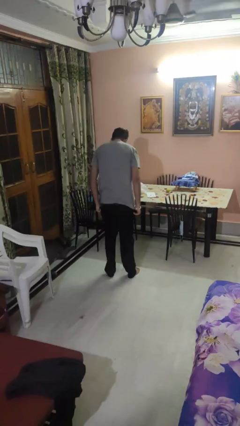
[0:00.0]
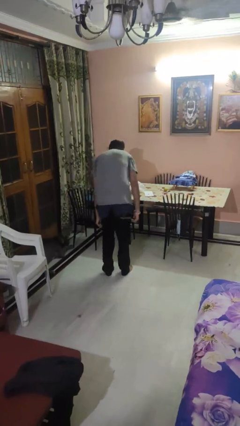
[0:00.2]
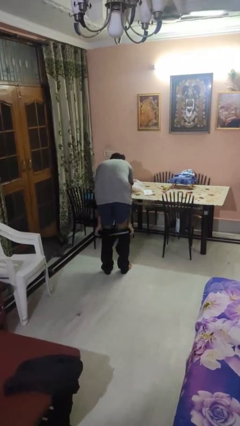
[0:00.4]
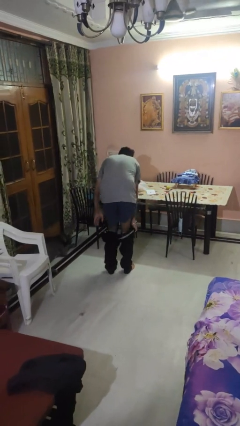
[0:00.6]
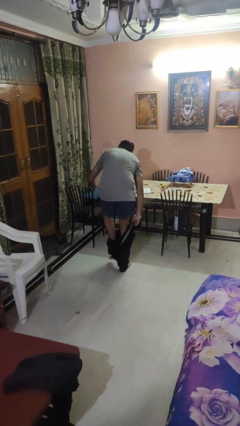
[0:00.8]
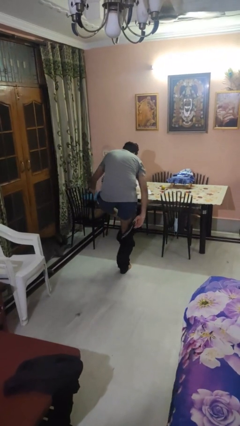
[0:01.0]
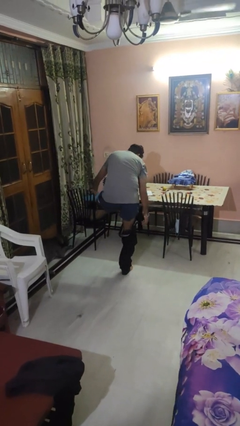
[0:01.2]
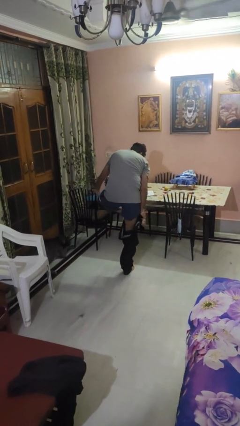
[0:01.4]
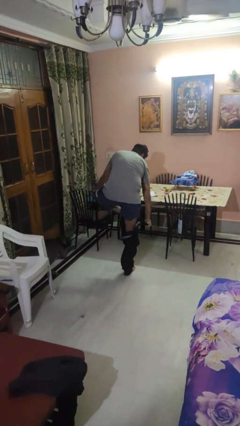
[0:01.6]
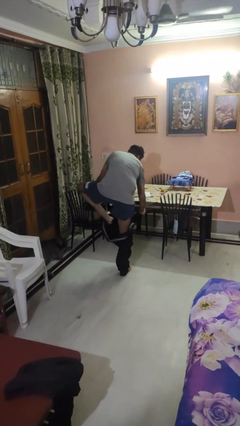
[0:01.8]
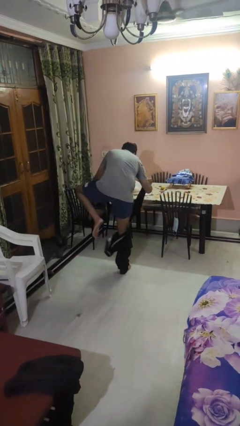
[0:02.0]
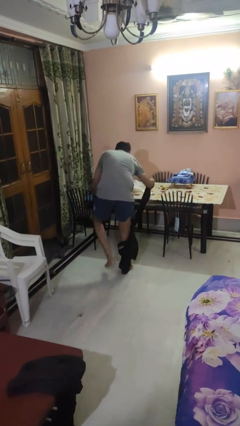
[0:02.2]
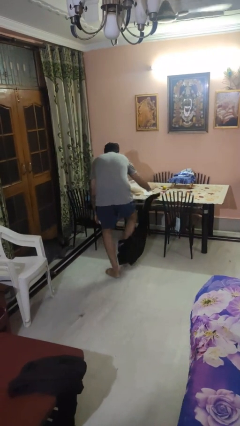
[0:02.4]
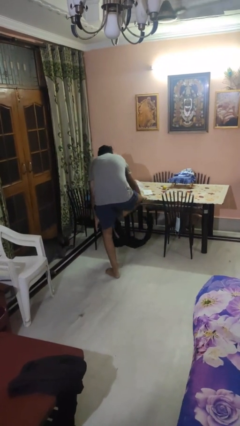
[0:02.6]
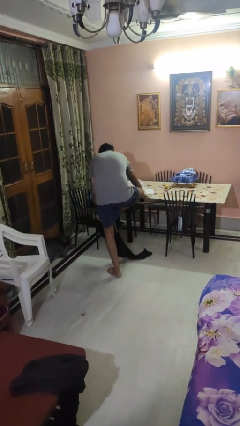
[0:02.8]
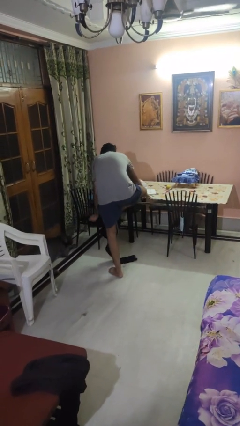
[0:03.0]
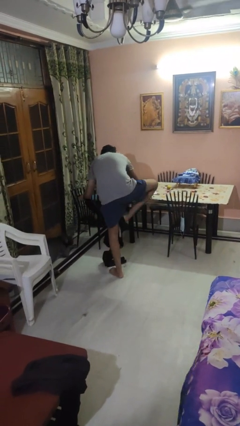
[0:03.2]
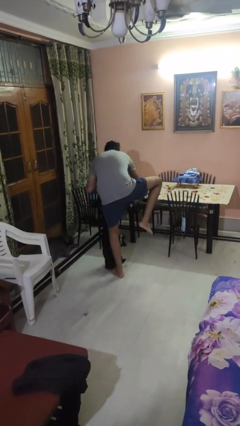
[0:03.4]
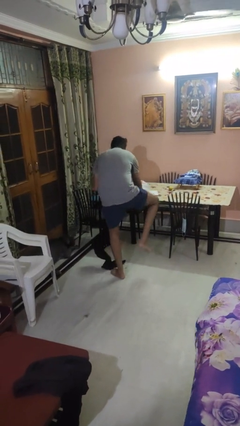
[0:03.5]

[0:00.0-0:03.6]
person takes off pants

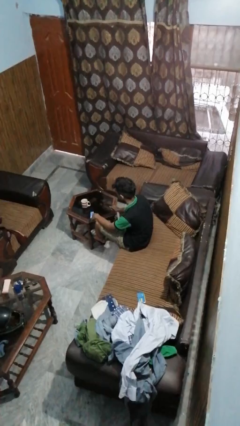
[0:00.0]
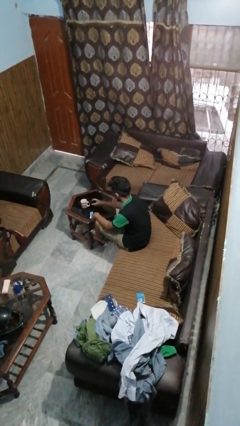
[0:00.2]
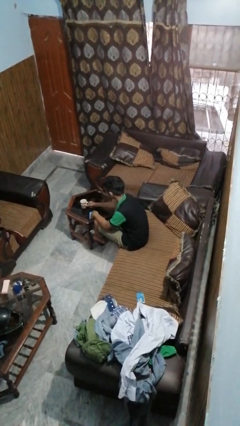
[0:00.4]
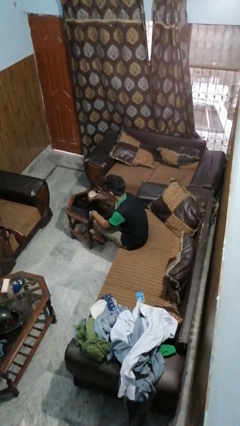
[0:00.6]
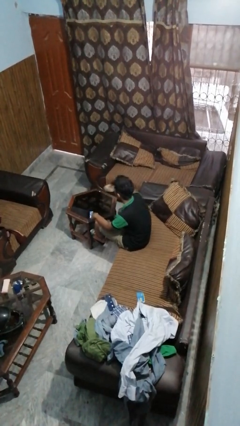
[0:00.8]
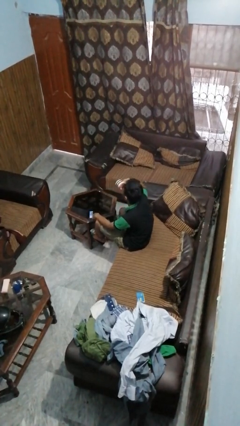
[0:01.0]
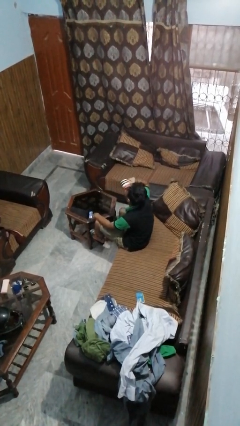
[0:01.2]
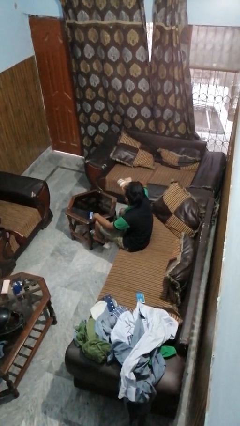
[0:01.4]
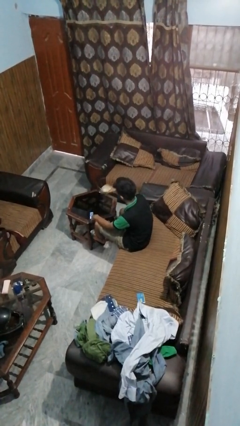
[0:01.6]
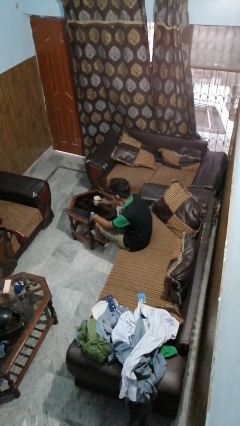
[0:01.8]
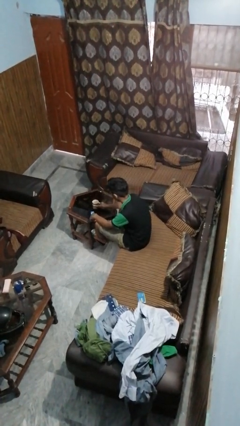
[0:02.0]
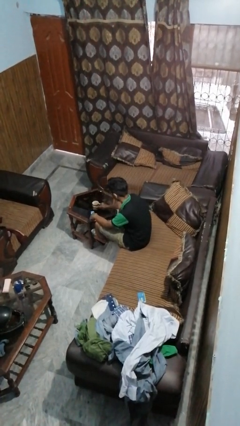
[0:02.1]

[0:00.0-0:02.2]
person drinks from cup

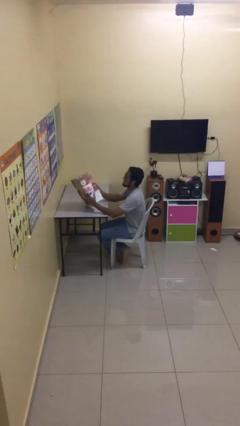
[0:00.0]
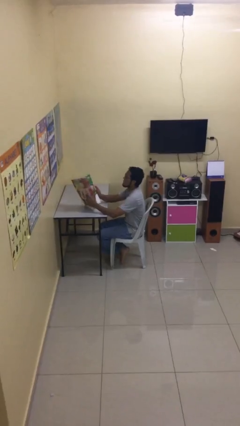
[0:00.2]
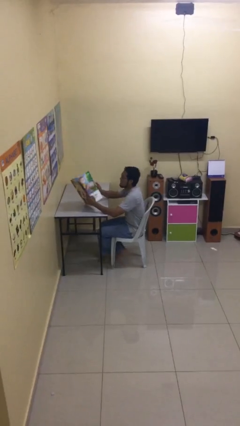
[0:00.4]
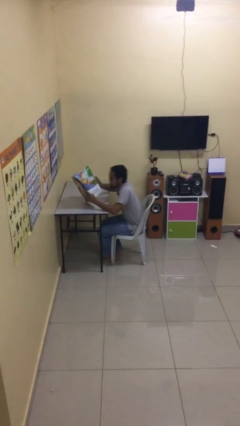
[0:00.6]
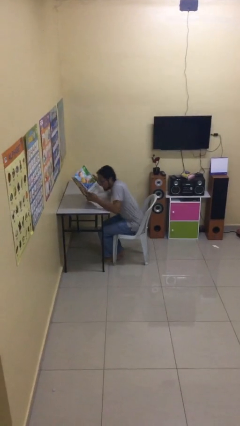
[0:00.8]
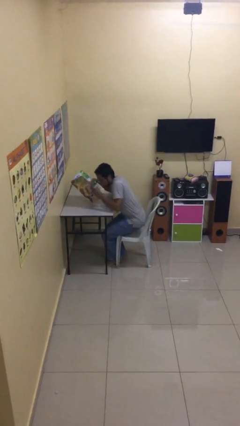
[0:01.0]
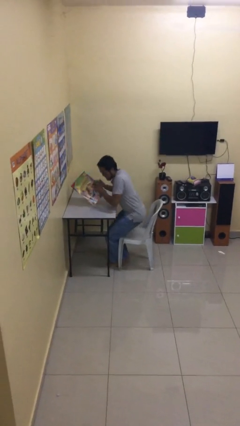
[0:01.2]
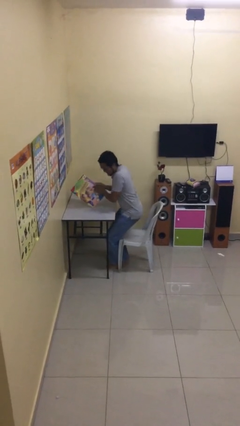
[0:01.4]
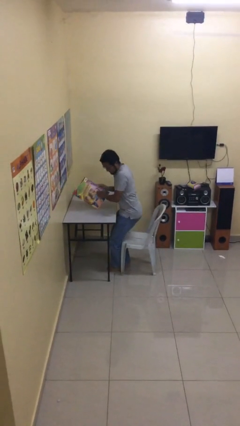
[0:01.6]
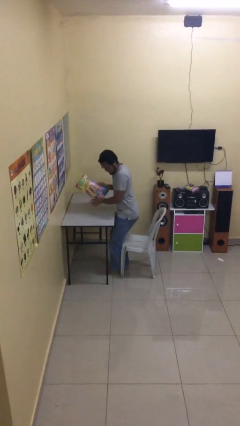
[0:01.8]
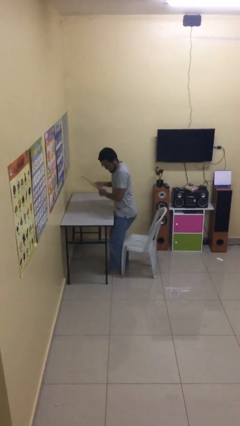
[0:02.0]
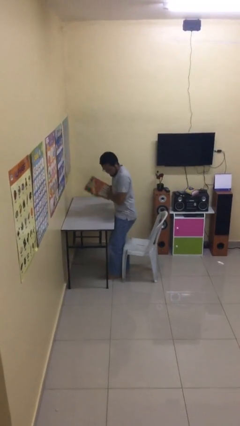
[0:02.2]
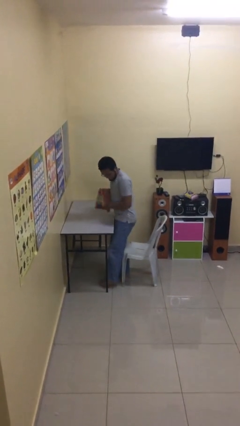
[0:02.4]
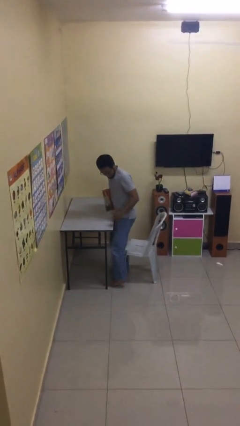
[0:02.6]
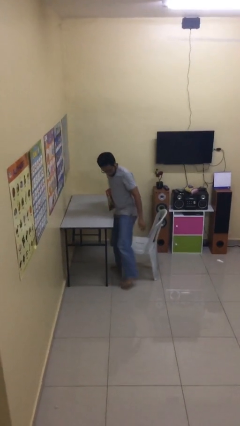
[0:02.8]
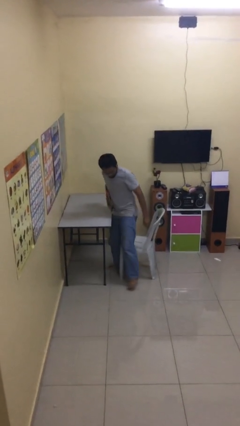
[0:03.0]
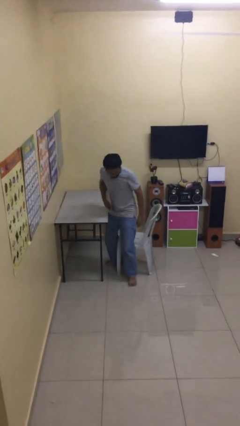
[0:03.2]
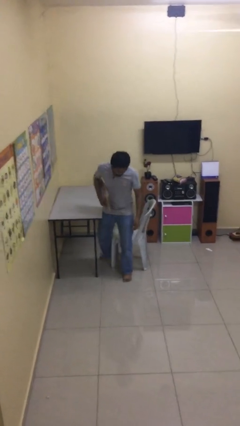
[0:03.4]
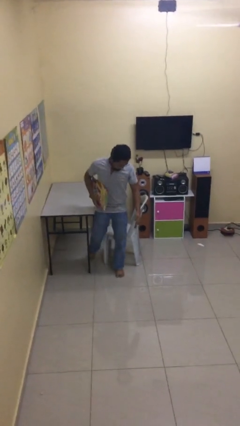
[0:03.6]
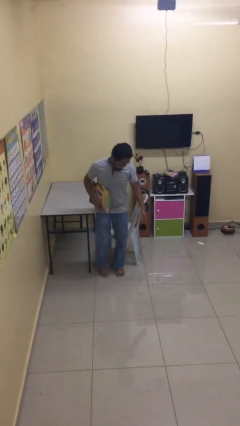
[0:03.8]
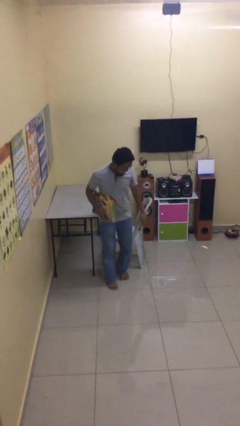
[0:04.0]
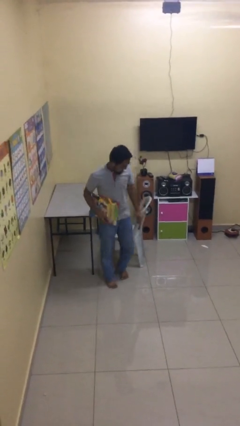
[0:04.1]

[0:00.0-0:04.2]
person stands up

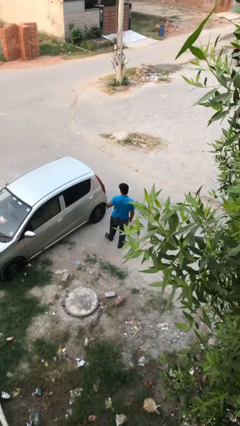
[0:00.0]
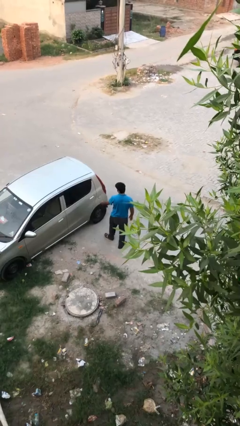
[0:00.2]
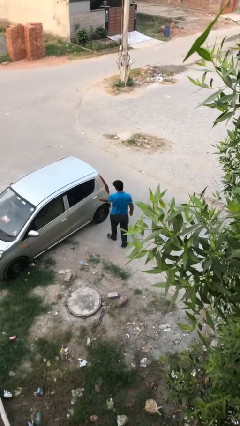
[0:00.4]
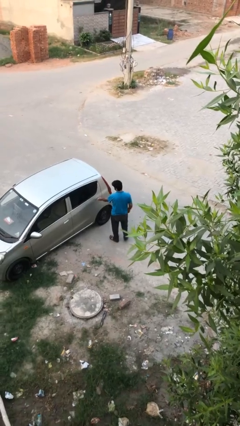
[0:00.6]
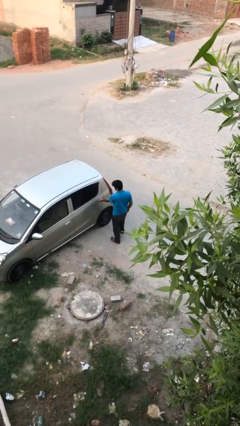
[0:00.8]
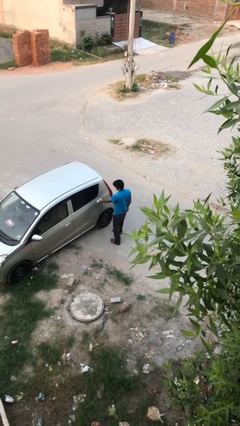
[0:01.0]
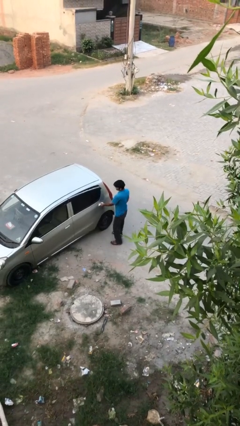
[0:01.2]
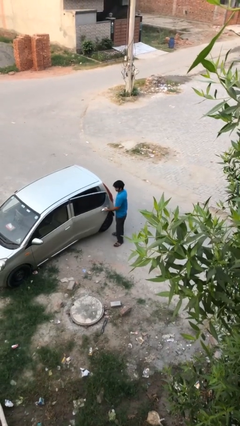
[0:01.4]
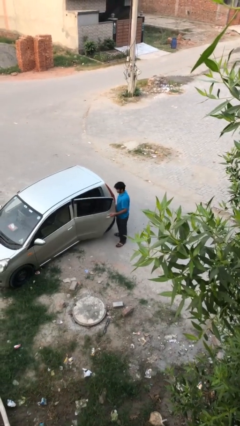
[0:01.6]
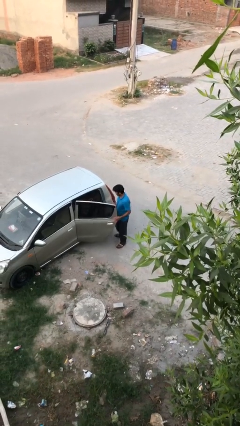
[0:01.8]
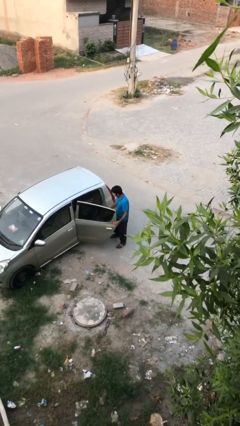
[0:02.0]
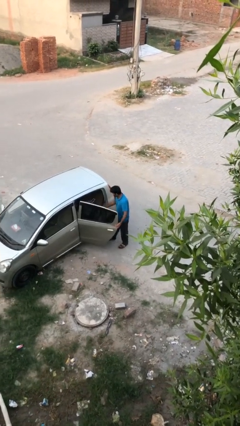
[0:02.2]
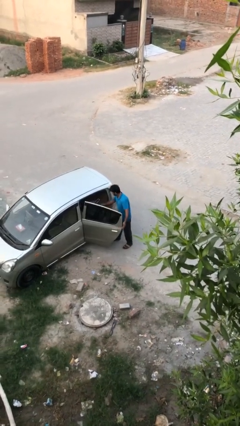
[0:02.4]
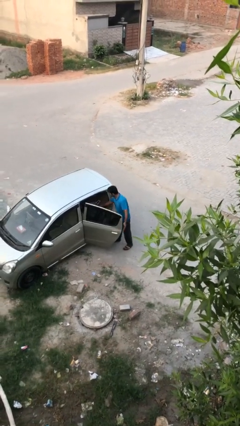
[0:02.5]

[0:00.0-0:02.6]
person opens car door

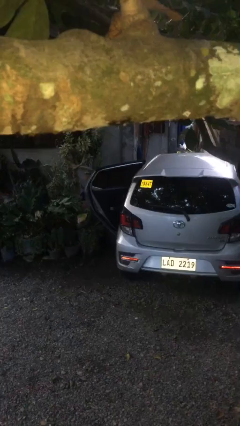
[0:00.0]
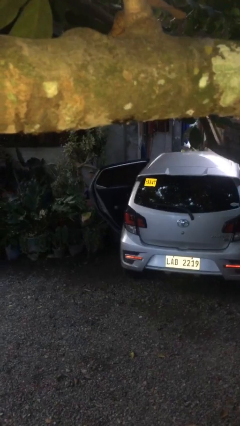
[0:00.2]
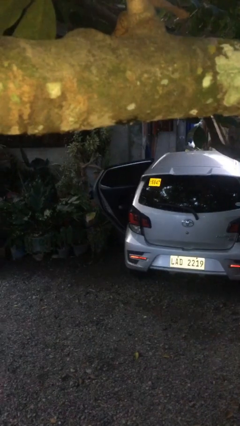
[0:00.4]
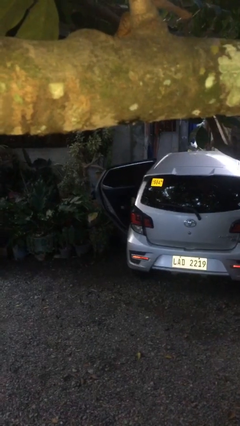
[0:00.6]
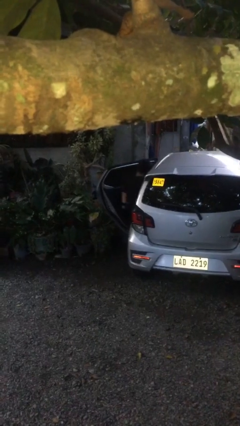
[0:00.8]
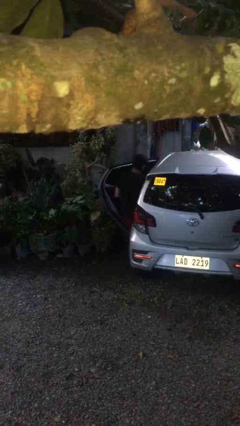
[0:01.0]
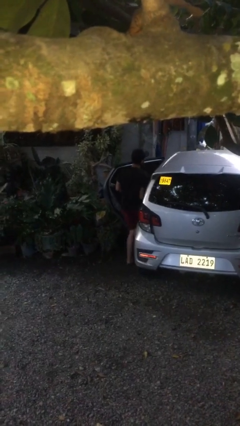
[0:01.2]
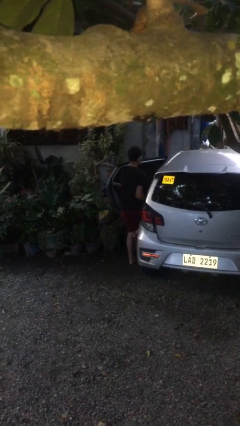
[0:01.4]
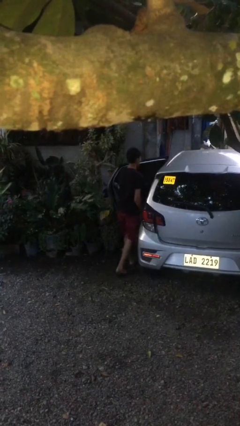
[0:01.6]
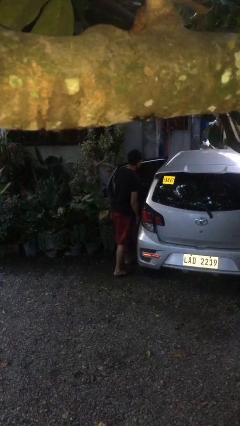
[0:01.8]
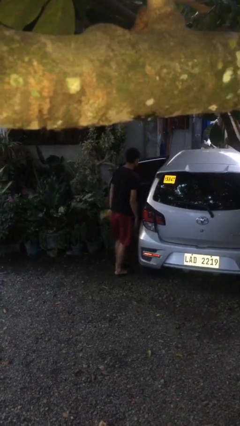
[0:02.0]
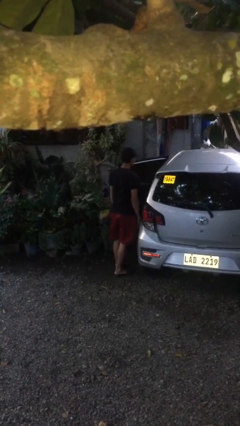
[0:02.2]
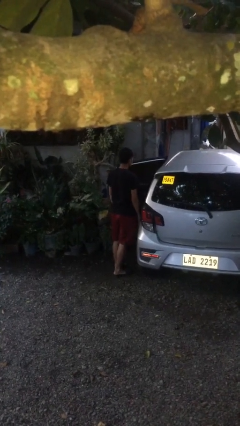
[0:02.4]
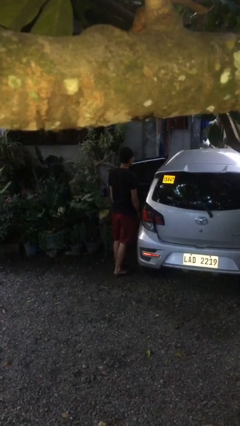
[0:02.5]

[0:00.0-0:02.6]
person exits car

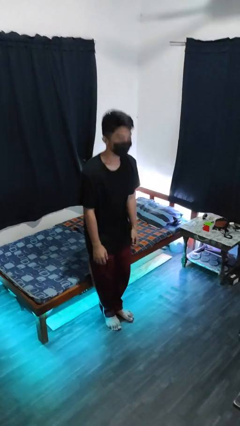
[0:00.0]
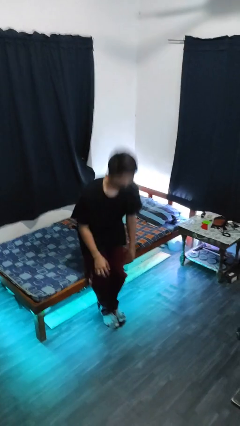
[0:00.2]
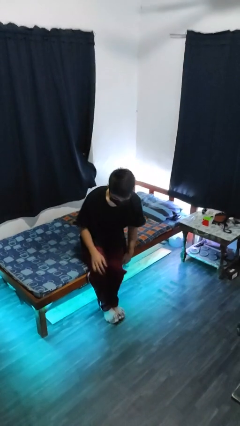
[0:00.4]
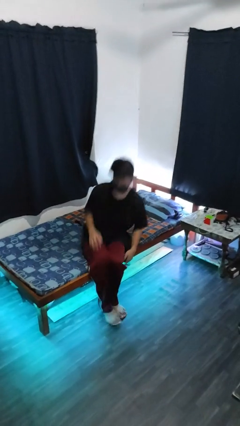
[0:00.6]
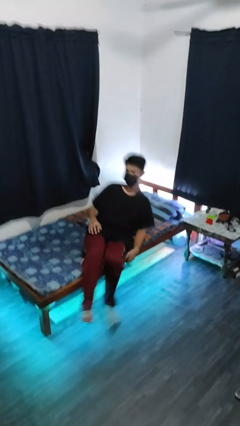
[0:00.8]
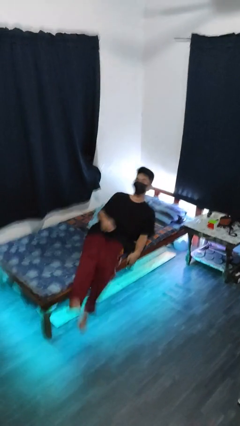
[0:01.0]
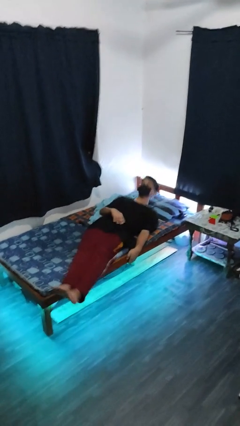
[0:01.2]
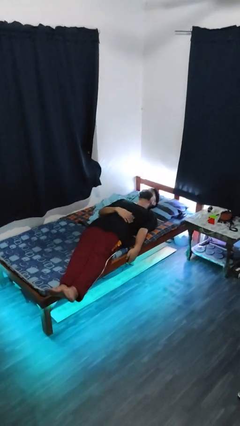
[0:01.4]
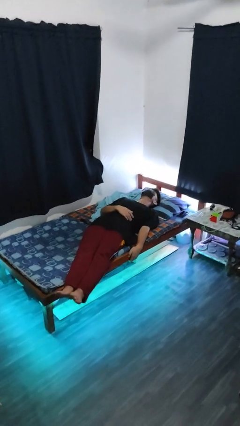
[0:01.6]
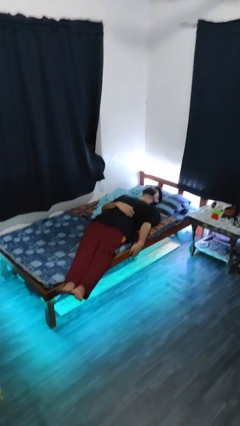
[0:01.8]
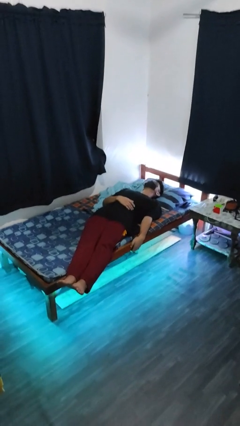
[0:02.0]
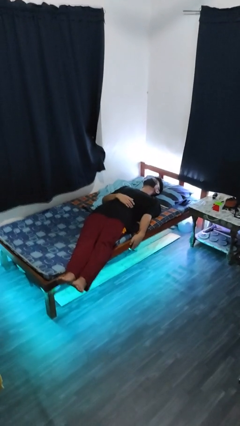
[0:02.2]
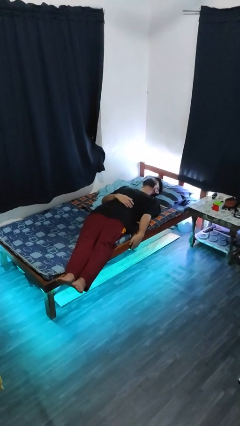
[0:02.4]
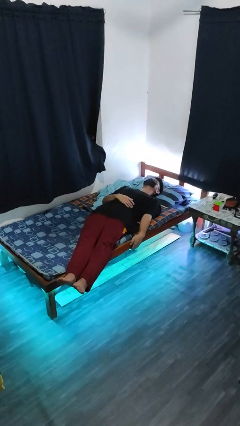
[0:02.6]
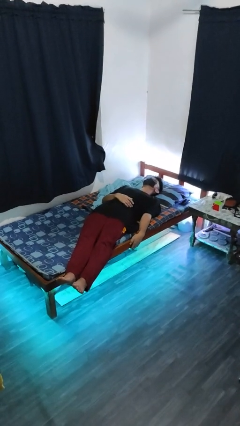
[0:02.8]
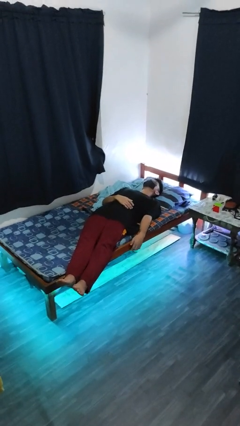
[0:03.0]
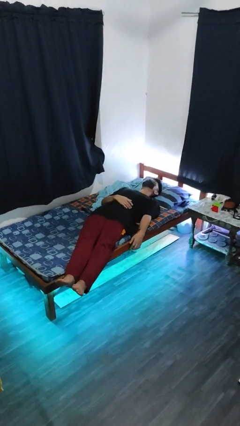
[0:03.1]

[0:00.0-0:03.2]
person lies down on bed
